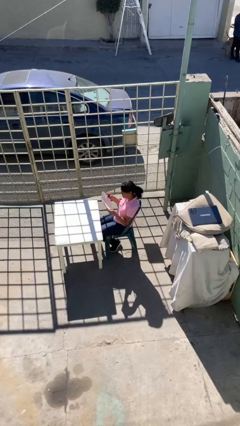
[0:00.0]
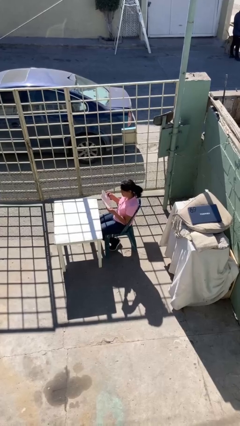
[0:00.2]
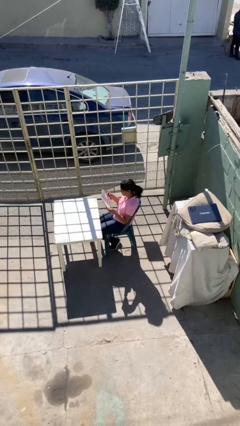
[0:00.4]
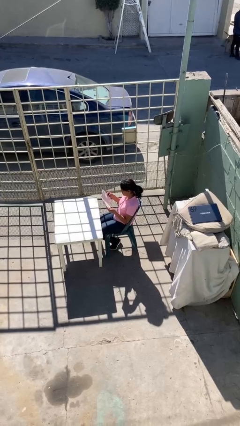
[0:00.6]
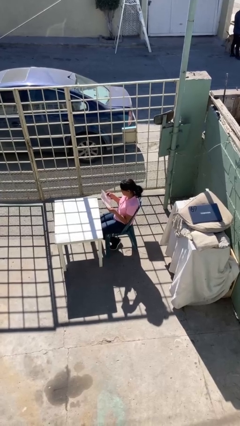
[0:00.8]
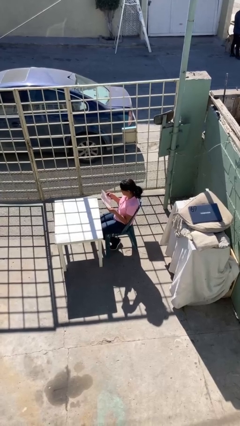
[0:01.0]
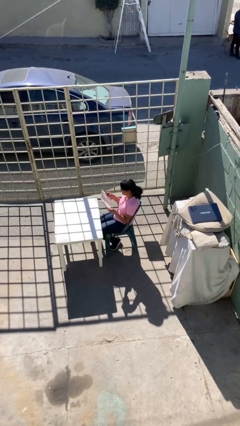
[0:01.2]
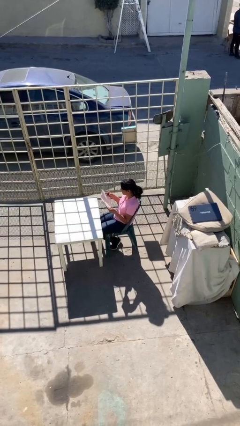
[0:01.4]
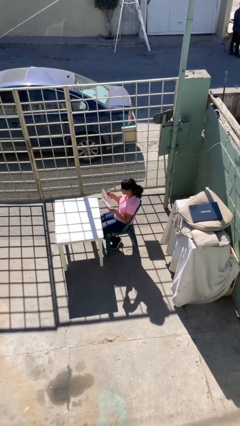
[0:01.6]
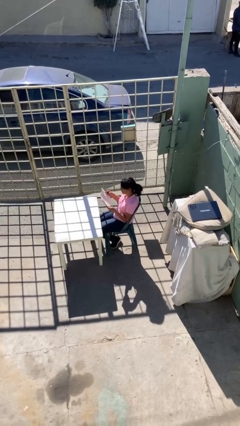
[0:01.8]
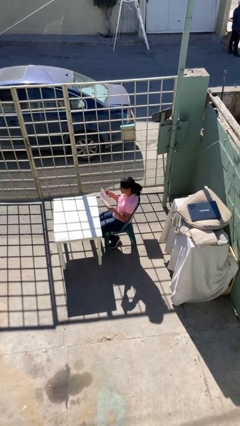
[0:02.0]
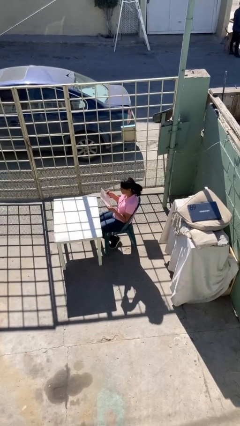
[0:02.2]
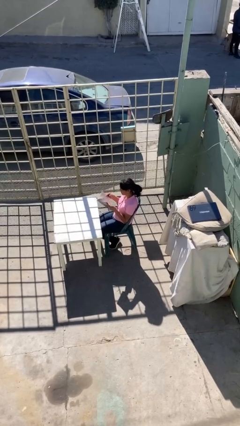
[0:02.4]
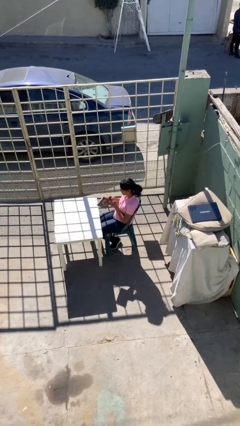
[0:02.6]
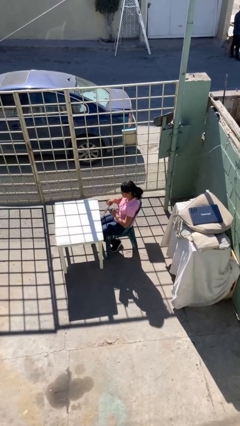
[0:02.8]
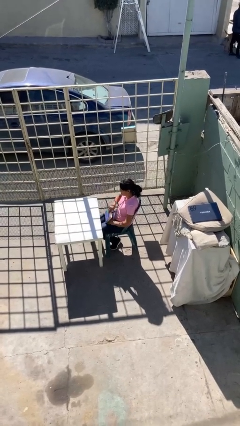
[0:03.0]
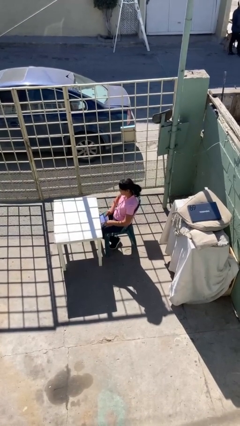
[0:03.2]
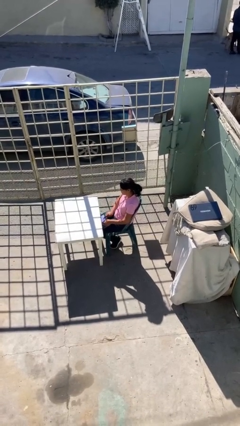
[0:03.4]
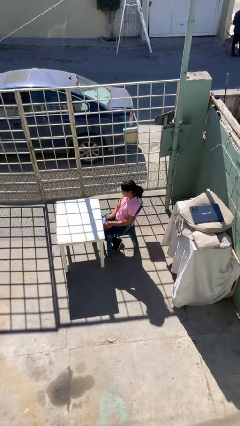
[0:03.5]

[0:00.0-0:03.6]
person reads document

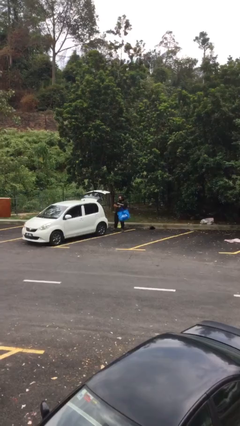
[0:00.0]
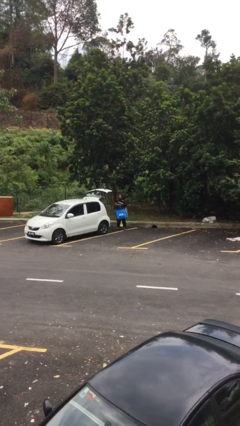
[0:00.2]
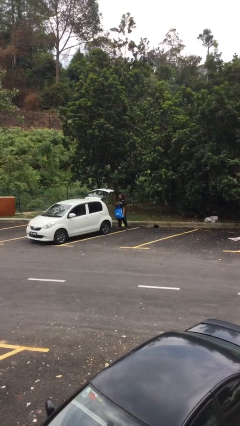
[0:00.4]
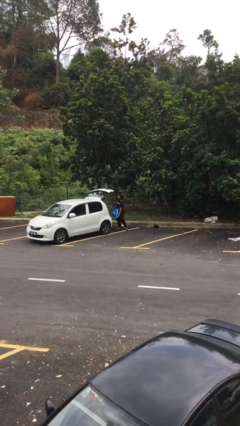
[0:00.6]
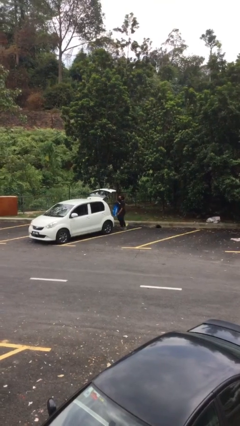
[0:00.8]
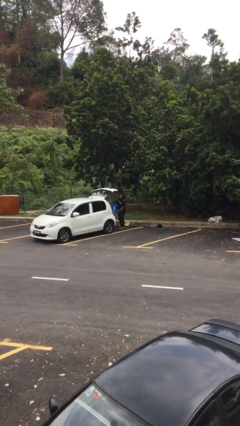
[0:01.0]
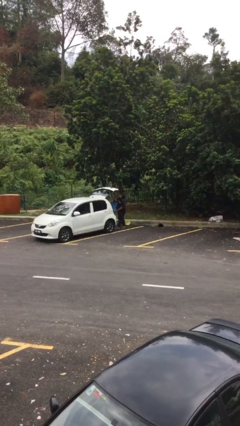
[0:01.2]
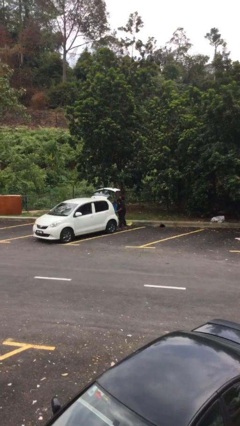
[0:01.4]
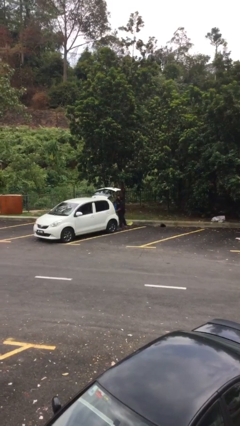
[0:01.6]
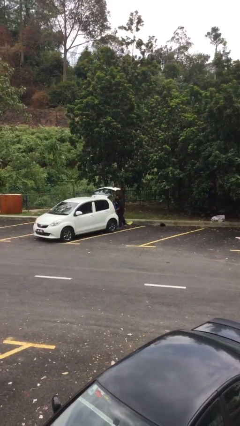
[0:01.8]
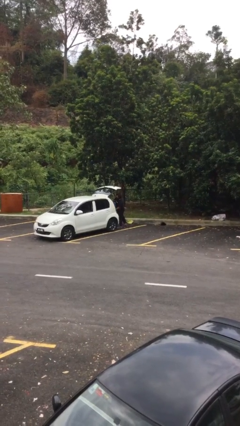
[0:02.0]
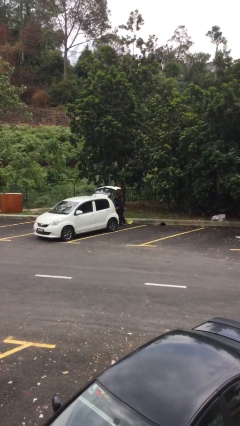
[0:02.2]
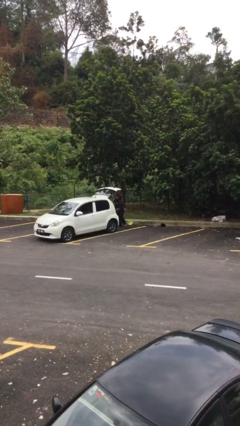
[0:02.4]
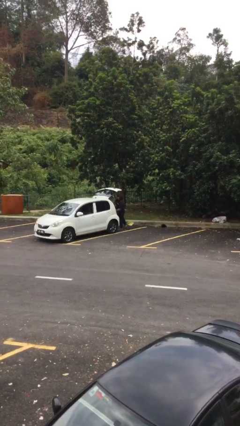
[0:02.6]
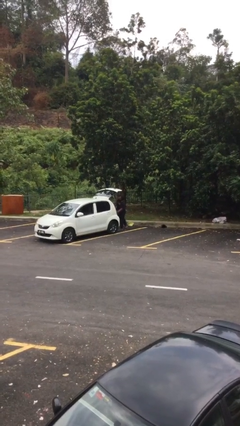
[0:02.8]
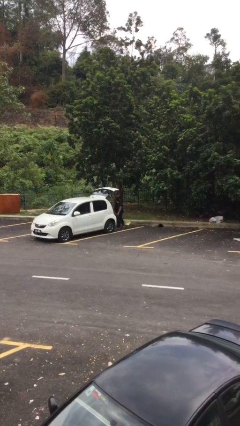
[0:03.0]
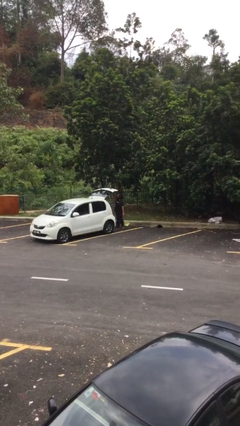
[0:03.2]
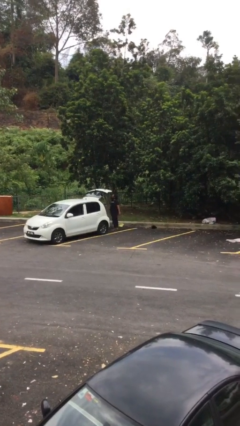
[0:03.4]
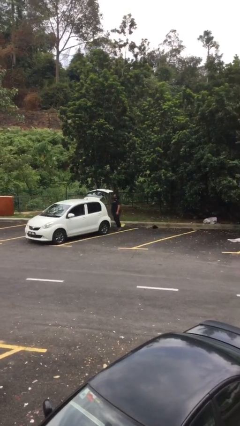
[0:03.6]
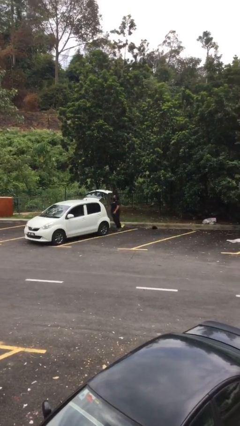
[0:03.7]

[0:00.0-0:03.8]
person loads car

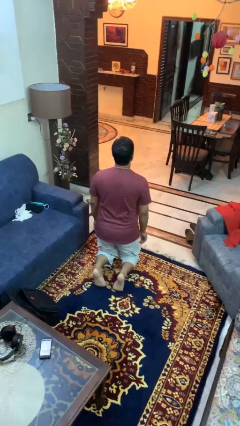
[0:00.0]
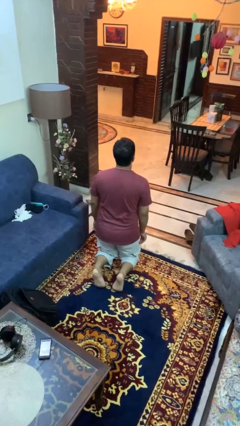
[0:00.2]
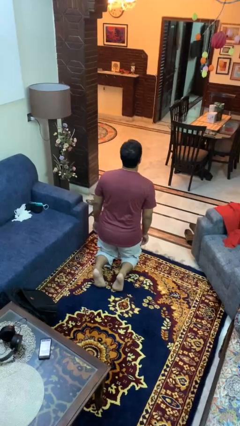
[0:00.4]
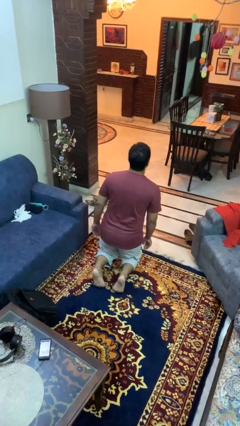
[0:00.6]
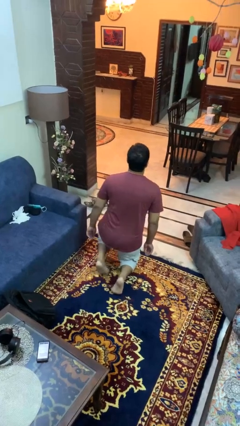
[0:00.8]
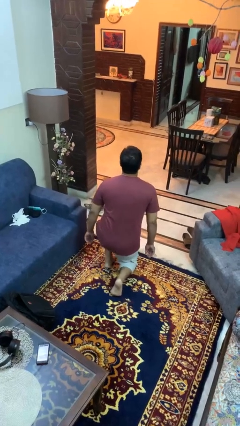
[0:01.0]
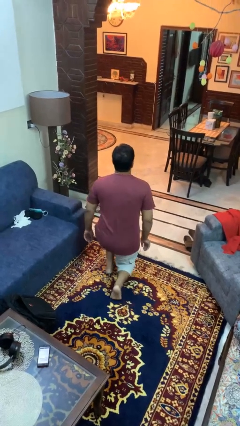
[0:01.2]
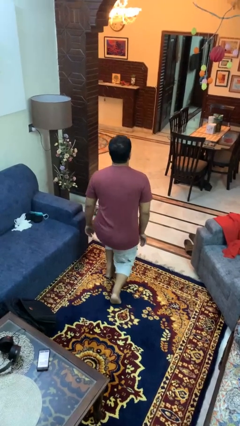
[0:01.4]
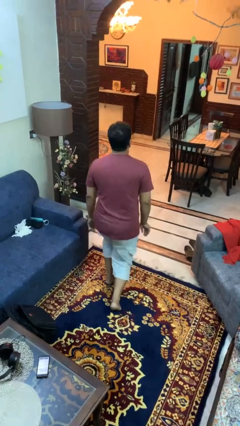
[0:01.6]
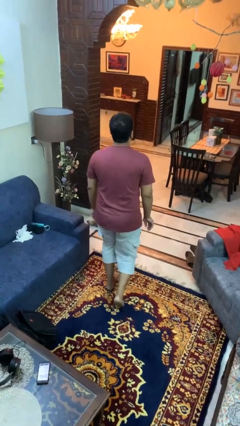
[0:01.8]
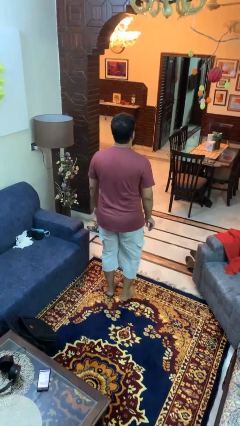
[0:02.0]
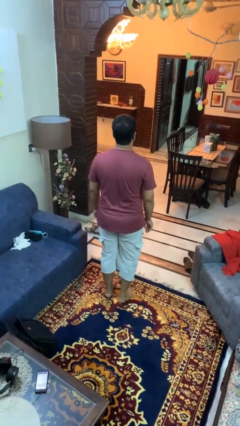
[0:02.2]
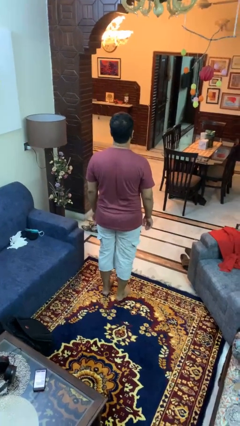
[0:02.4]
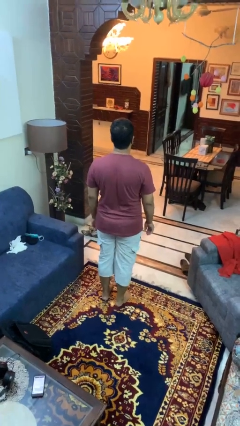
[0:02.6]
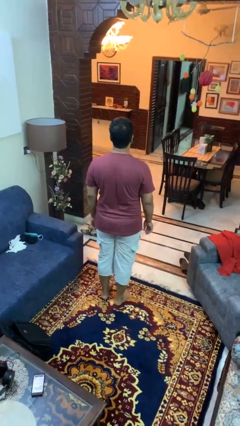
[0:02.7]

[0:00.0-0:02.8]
person stands up from floor

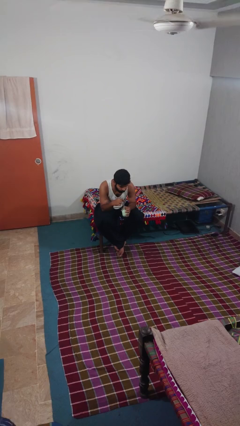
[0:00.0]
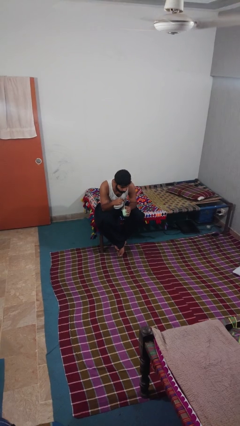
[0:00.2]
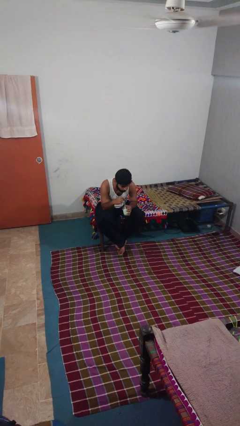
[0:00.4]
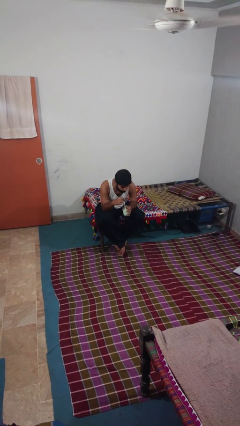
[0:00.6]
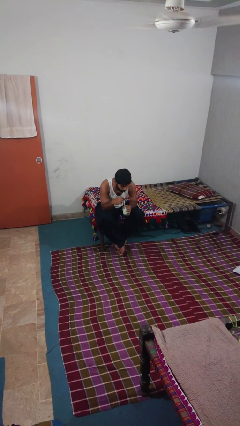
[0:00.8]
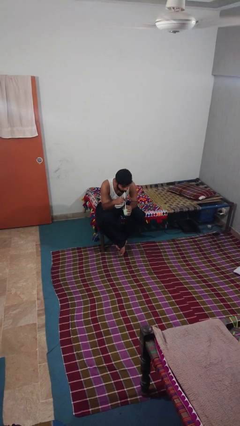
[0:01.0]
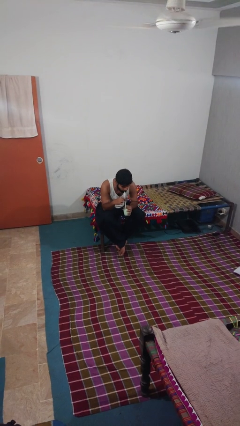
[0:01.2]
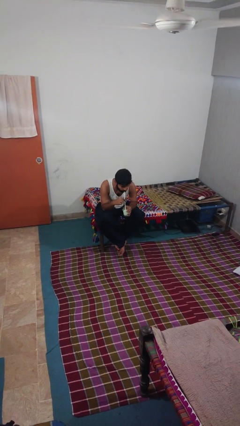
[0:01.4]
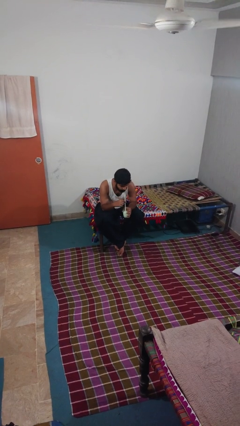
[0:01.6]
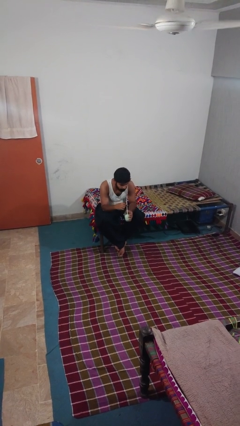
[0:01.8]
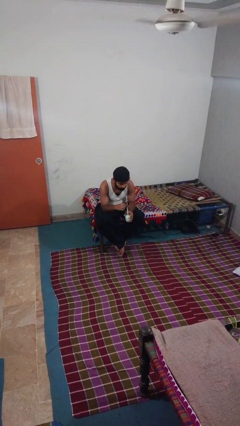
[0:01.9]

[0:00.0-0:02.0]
person drinks from straw

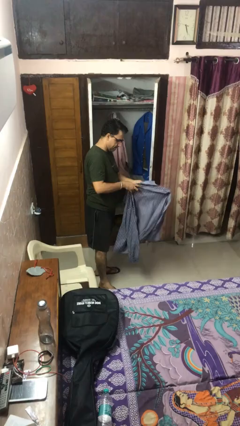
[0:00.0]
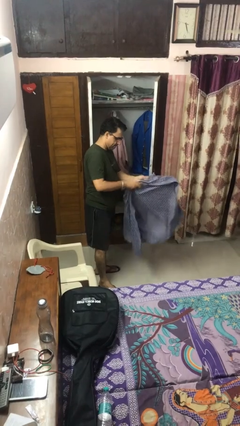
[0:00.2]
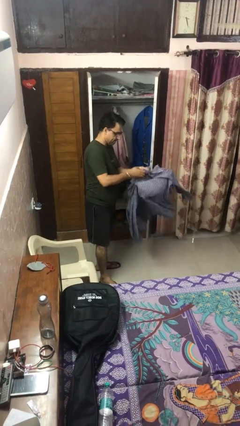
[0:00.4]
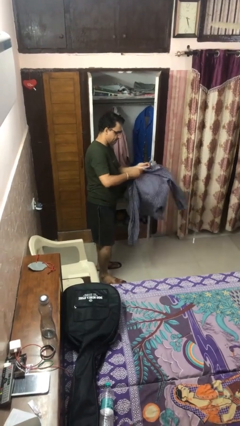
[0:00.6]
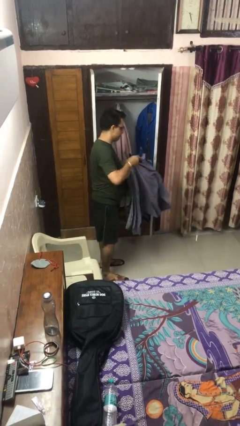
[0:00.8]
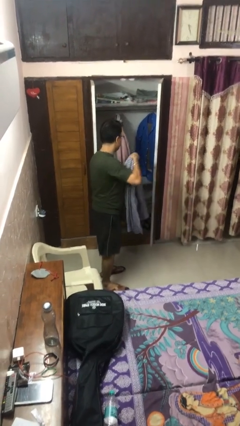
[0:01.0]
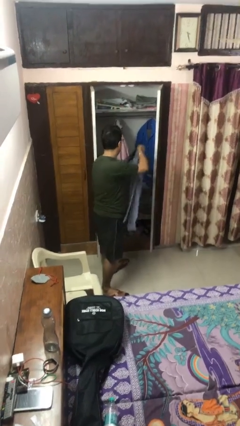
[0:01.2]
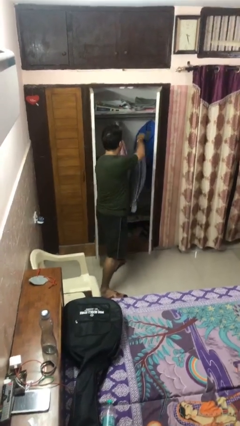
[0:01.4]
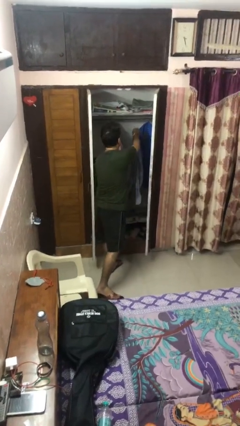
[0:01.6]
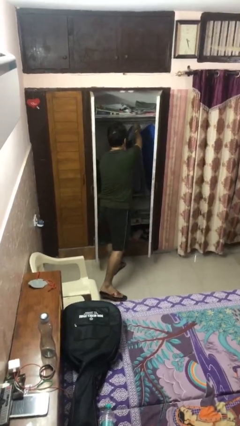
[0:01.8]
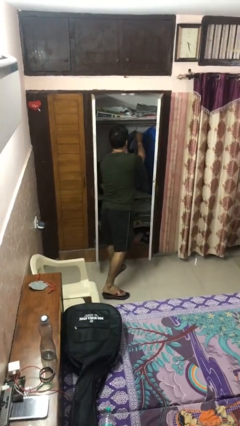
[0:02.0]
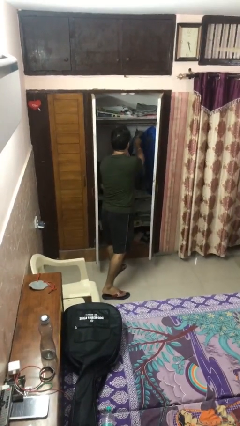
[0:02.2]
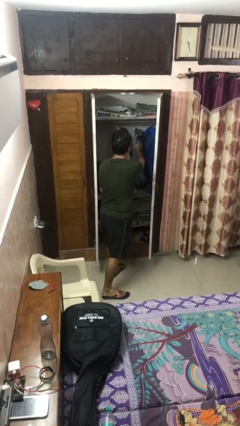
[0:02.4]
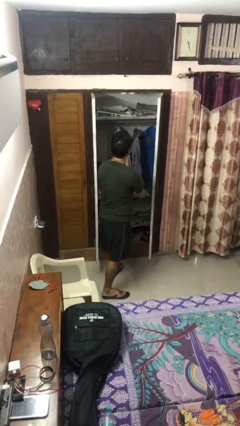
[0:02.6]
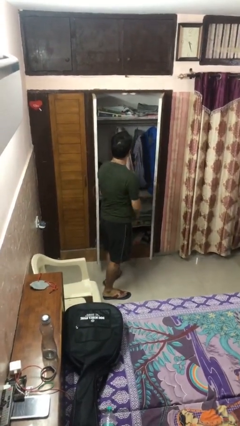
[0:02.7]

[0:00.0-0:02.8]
person puts clothes into closet

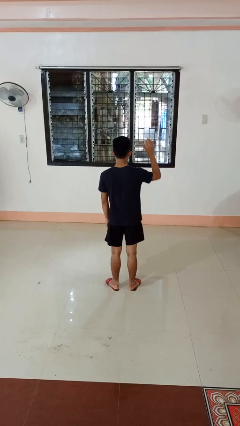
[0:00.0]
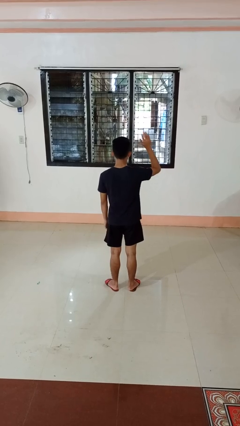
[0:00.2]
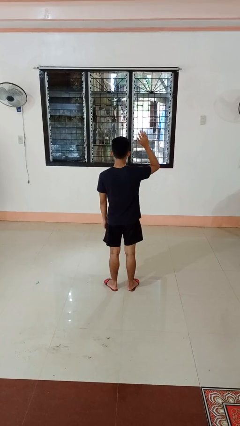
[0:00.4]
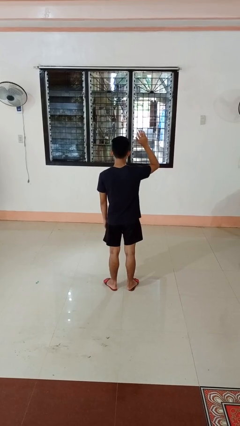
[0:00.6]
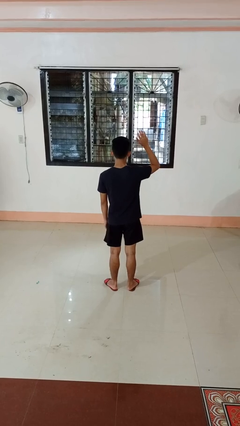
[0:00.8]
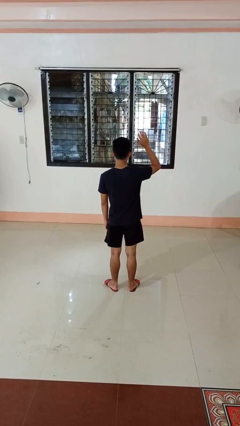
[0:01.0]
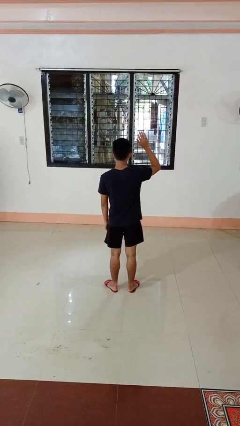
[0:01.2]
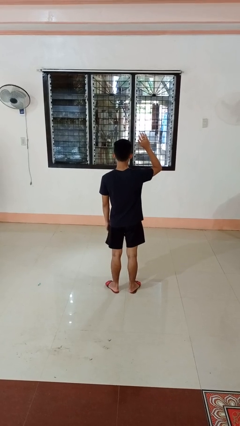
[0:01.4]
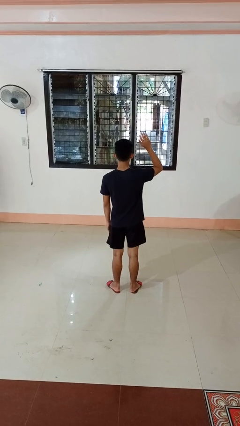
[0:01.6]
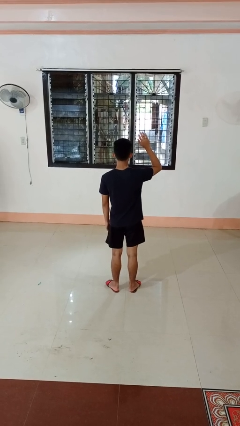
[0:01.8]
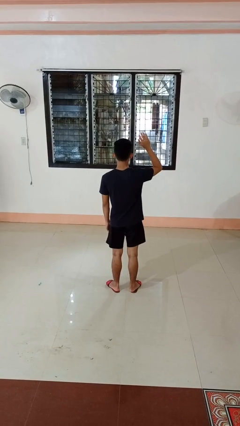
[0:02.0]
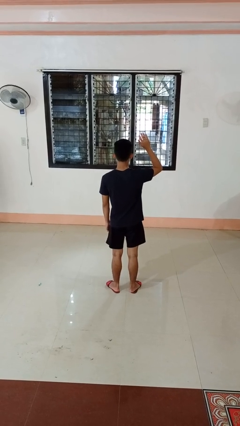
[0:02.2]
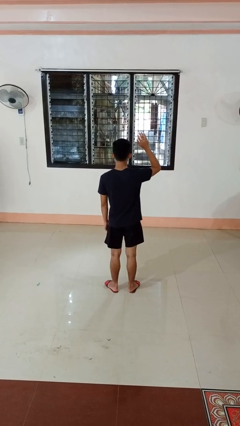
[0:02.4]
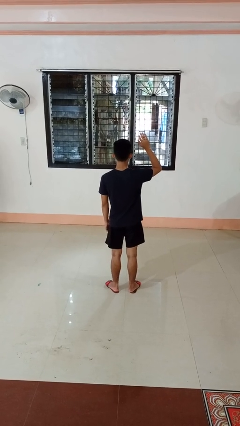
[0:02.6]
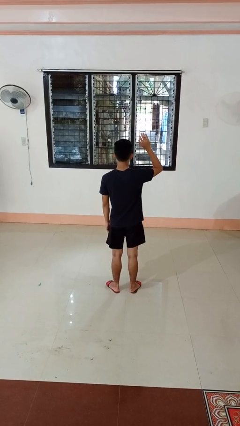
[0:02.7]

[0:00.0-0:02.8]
person gestures raise hand
